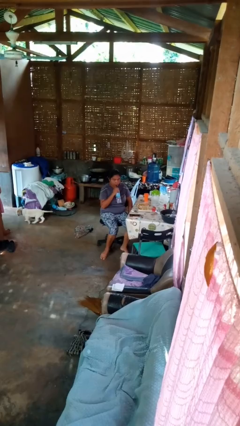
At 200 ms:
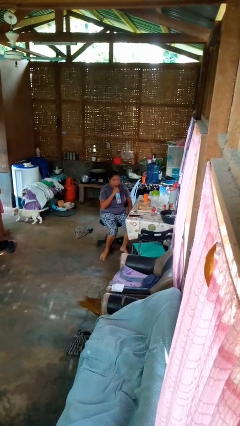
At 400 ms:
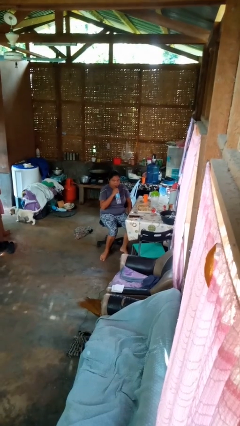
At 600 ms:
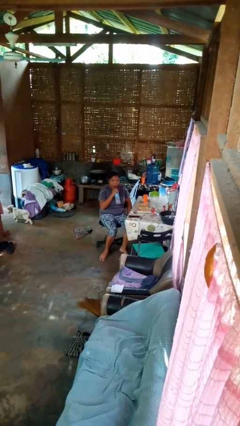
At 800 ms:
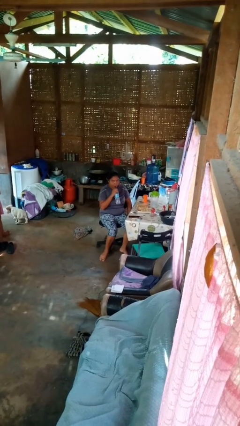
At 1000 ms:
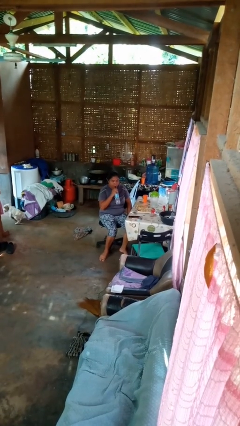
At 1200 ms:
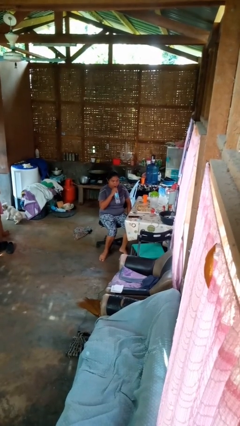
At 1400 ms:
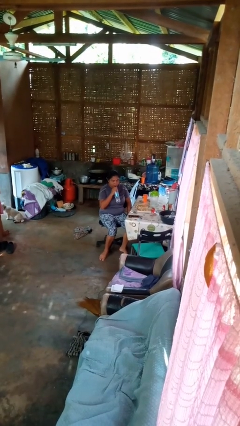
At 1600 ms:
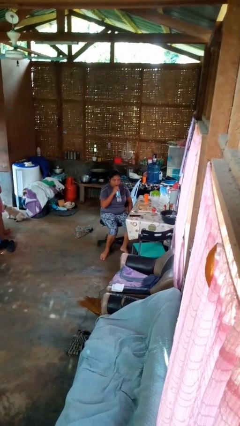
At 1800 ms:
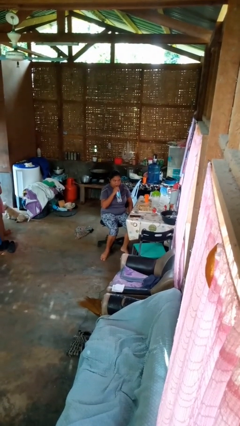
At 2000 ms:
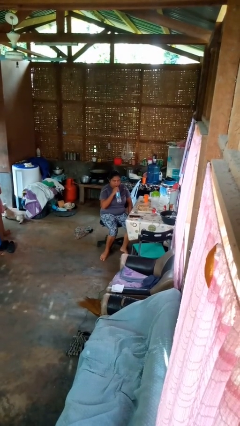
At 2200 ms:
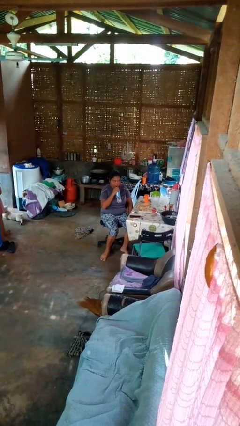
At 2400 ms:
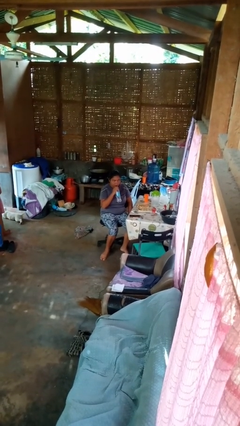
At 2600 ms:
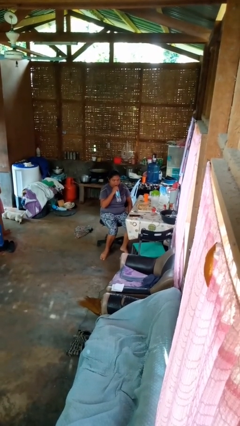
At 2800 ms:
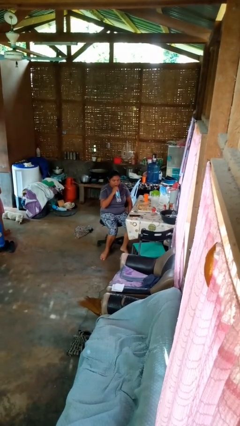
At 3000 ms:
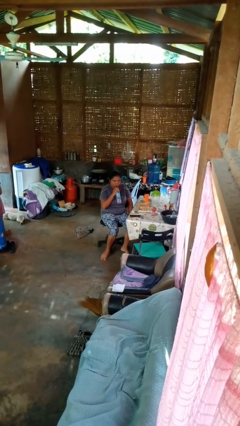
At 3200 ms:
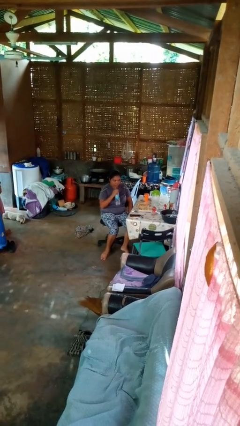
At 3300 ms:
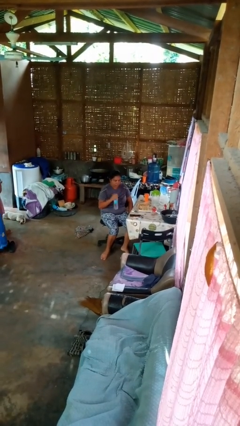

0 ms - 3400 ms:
person drinks from straw

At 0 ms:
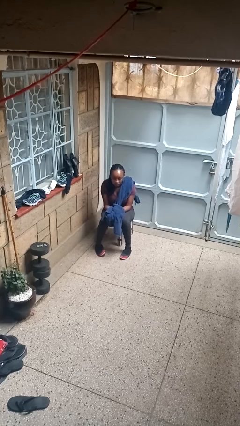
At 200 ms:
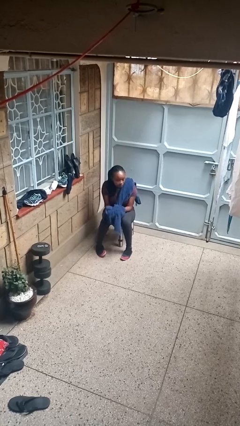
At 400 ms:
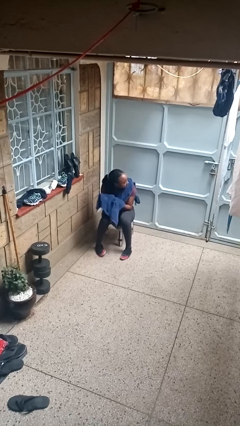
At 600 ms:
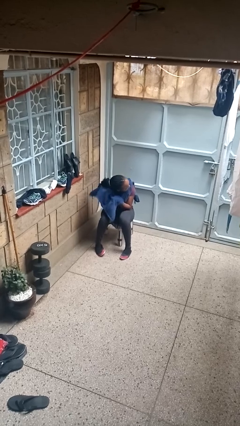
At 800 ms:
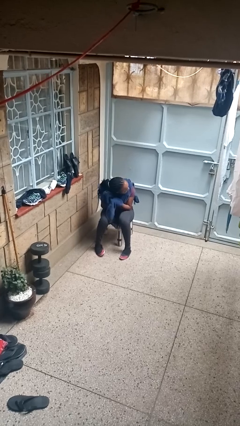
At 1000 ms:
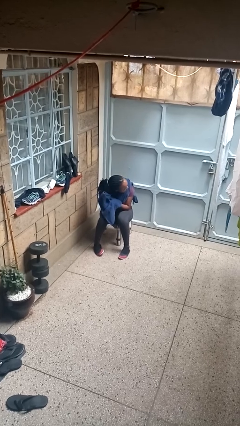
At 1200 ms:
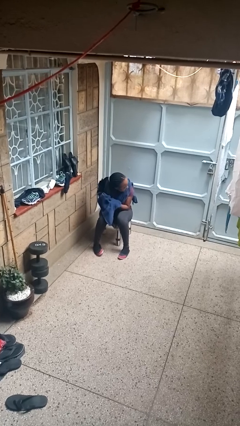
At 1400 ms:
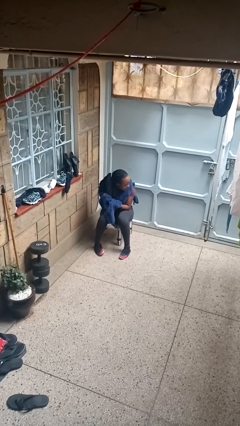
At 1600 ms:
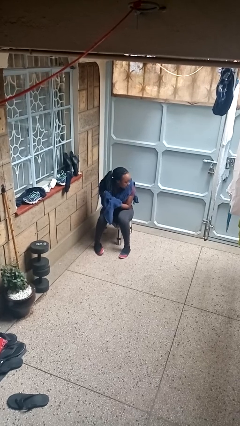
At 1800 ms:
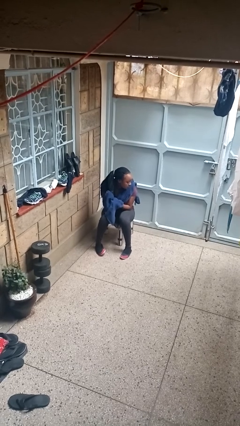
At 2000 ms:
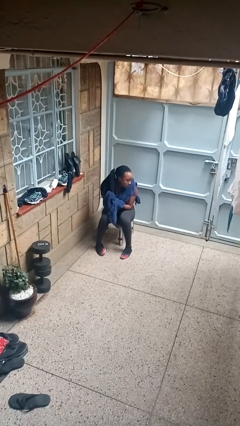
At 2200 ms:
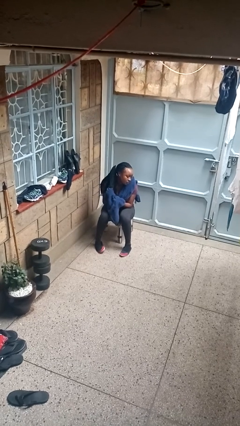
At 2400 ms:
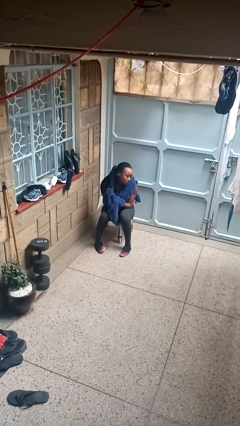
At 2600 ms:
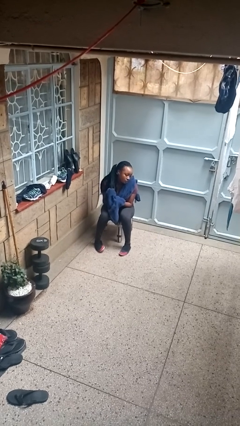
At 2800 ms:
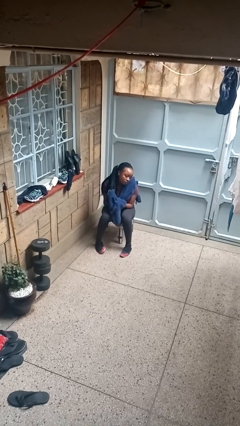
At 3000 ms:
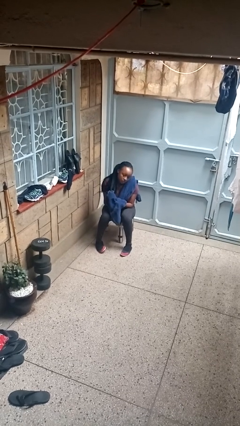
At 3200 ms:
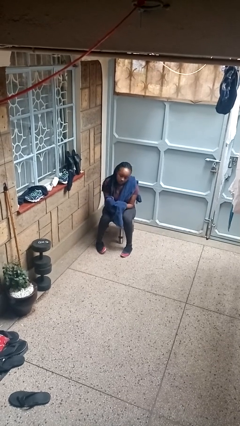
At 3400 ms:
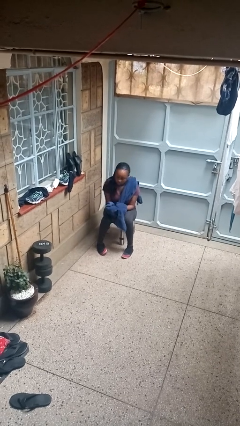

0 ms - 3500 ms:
person dries hair with towel

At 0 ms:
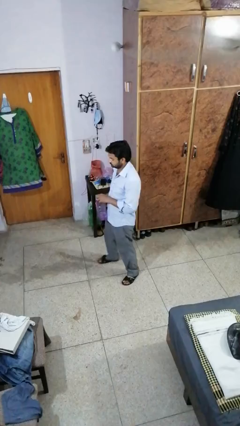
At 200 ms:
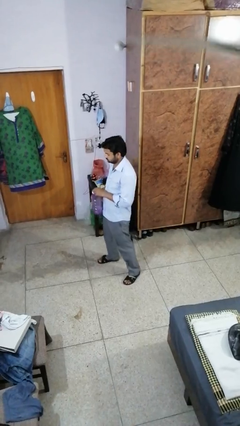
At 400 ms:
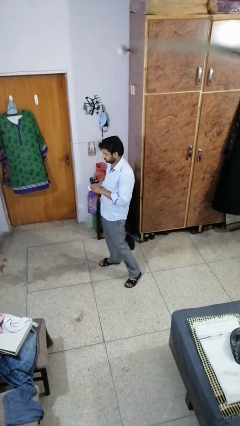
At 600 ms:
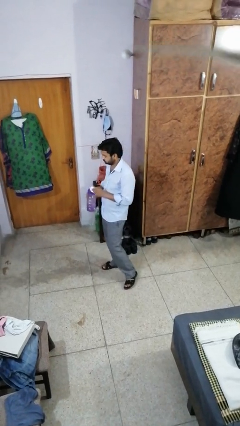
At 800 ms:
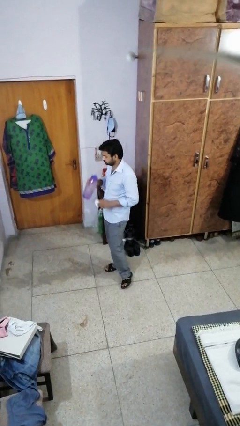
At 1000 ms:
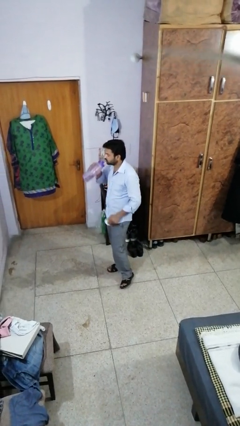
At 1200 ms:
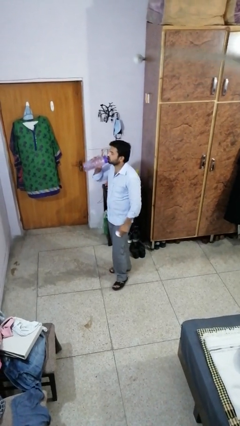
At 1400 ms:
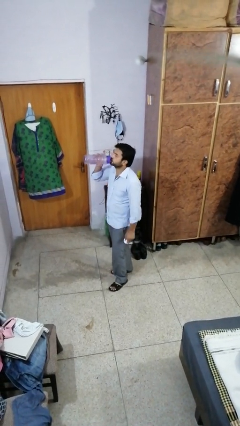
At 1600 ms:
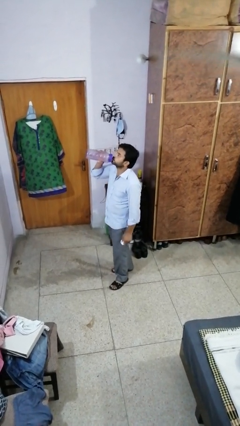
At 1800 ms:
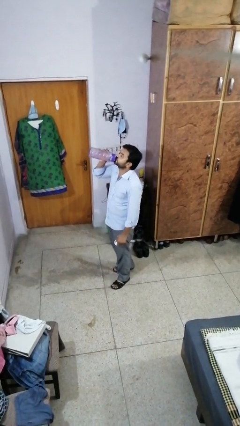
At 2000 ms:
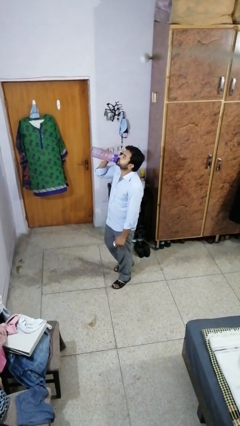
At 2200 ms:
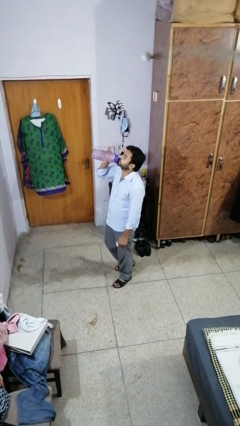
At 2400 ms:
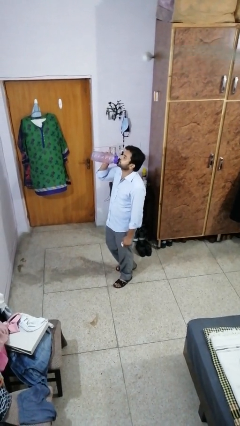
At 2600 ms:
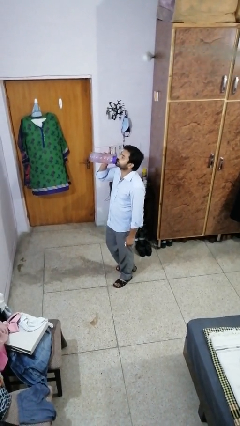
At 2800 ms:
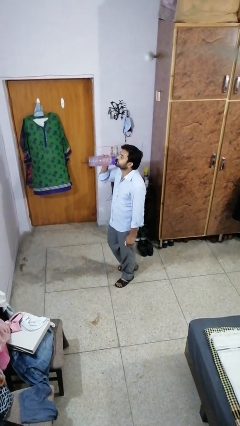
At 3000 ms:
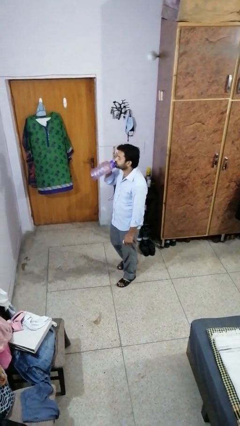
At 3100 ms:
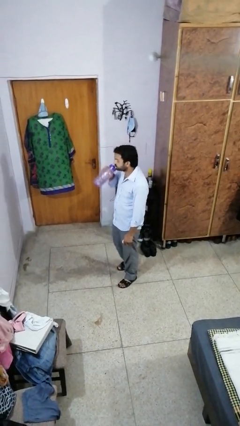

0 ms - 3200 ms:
person drinks from bottle

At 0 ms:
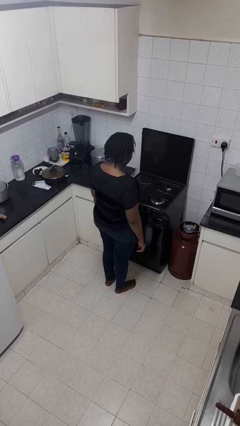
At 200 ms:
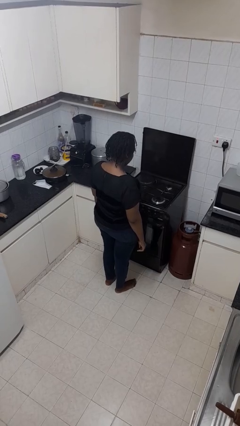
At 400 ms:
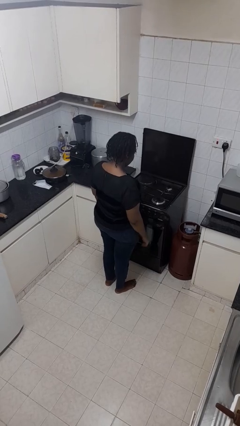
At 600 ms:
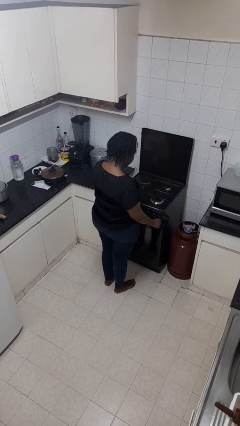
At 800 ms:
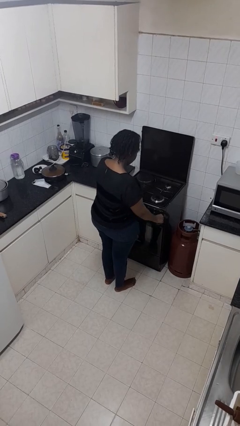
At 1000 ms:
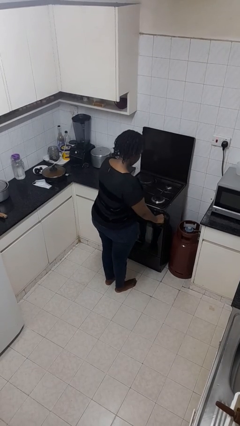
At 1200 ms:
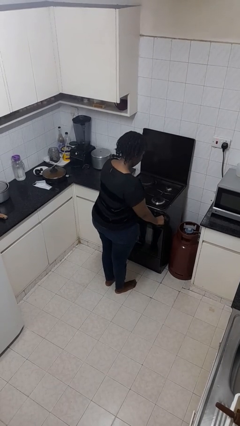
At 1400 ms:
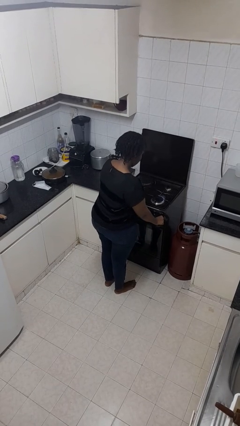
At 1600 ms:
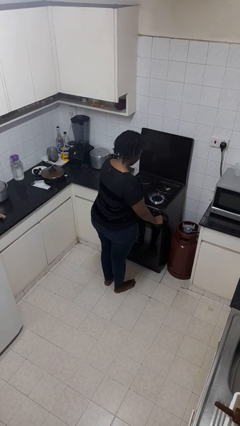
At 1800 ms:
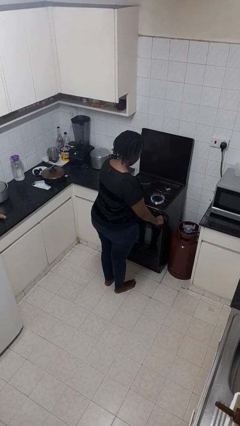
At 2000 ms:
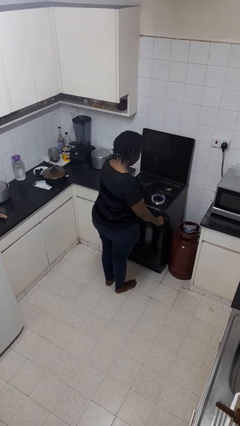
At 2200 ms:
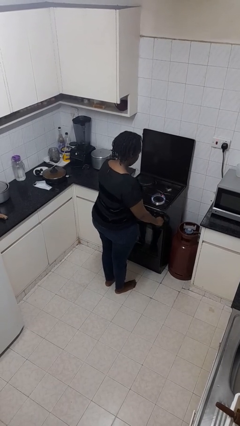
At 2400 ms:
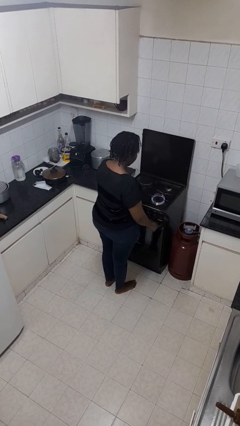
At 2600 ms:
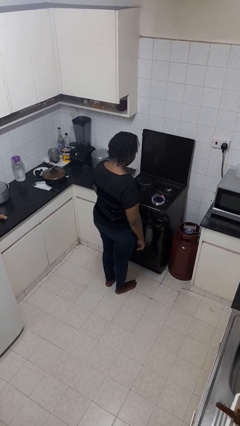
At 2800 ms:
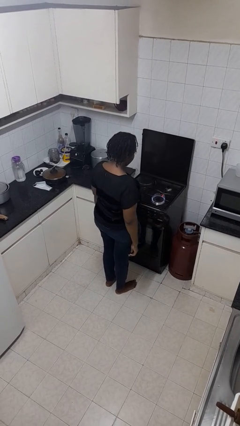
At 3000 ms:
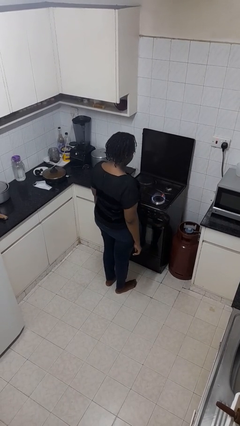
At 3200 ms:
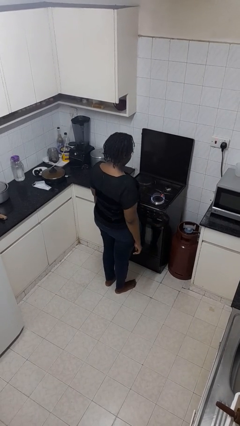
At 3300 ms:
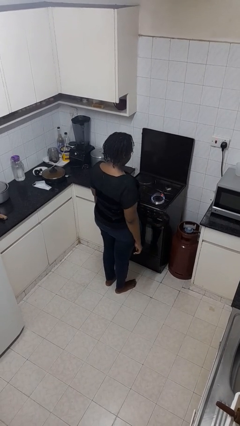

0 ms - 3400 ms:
person turns on stovetop

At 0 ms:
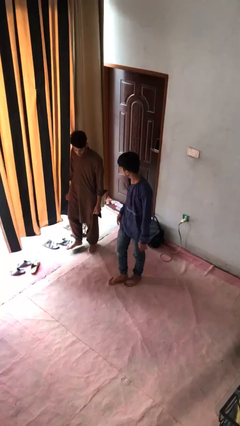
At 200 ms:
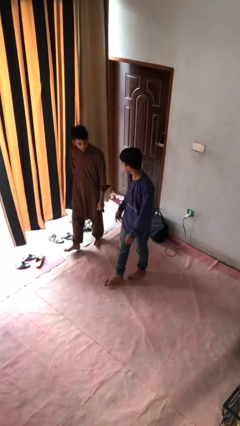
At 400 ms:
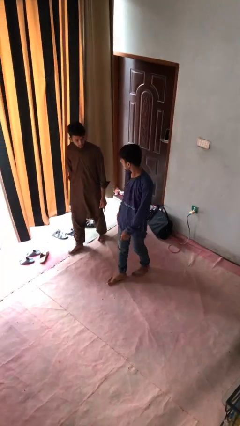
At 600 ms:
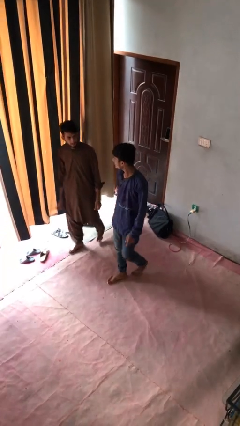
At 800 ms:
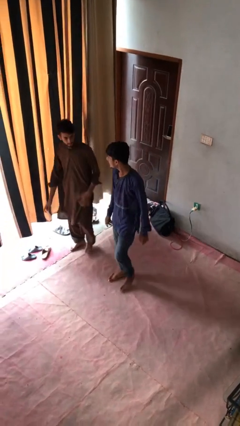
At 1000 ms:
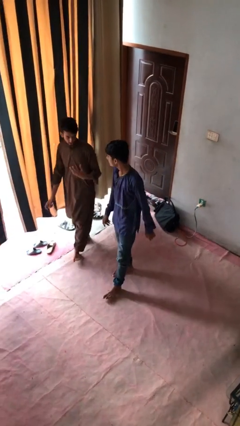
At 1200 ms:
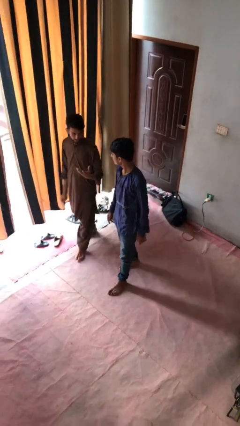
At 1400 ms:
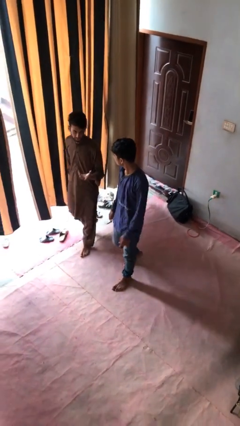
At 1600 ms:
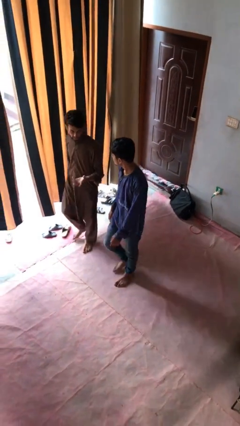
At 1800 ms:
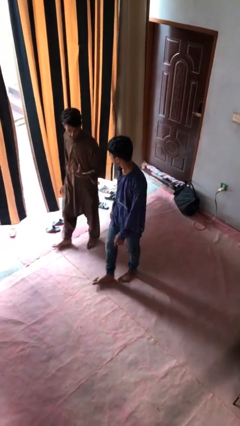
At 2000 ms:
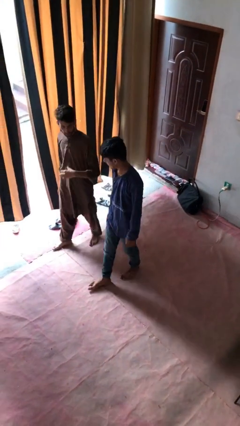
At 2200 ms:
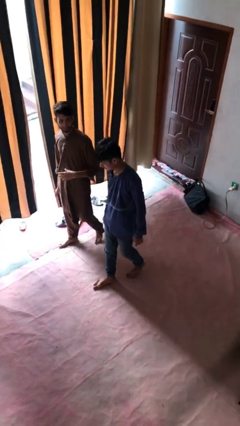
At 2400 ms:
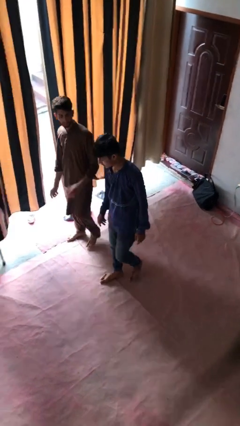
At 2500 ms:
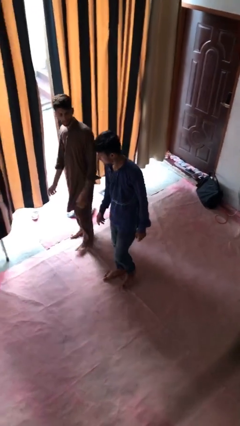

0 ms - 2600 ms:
person talks to person

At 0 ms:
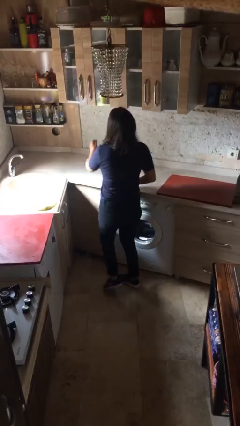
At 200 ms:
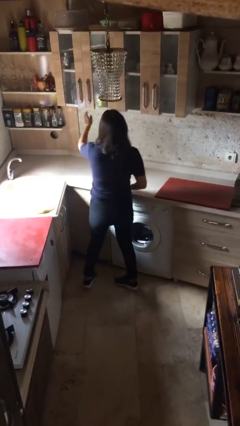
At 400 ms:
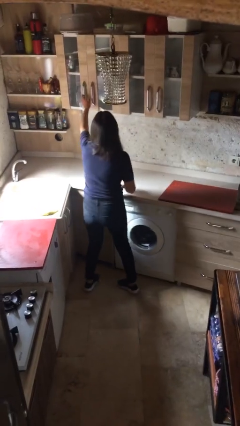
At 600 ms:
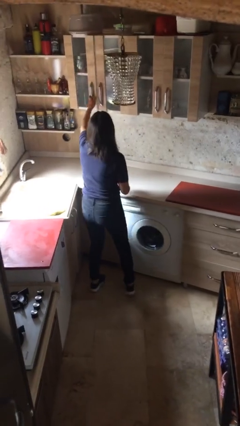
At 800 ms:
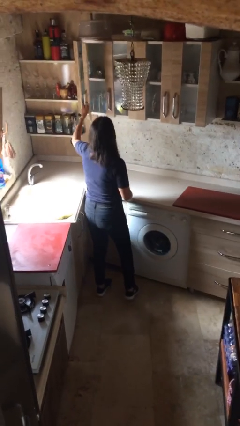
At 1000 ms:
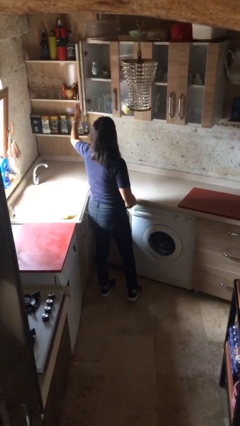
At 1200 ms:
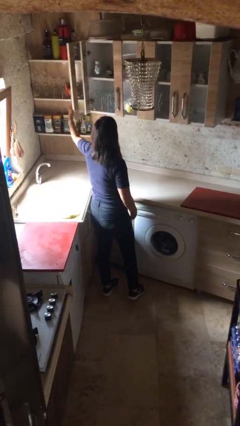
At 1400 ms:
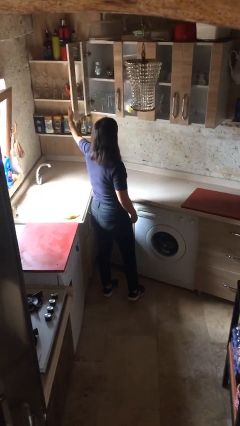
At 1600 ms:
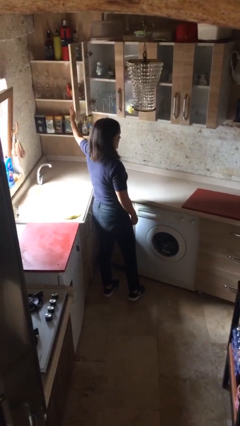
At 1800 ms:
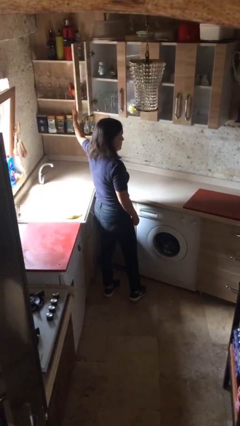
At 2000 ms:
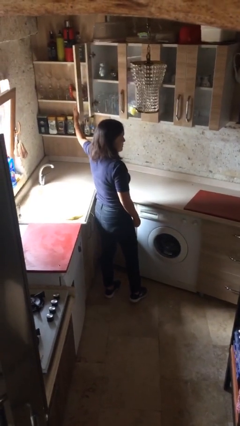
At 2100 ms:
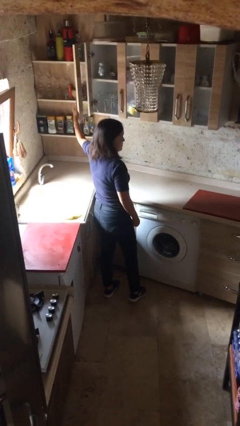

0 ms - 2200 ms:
person opens cabinet
